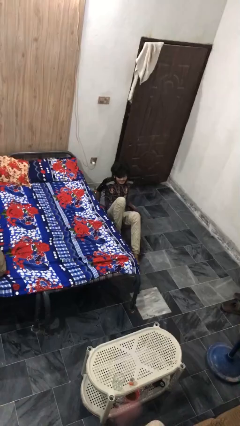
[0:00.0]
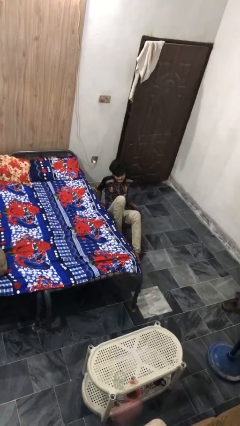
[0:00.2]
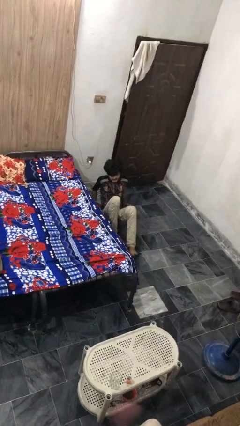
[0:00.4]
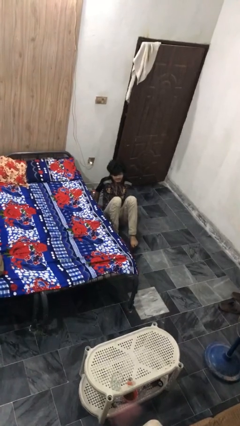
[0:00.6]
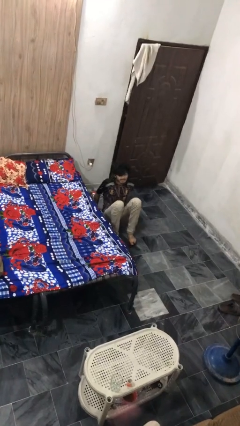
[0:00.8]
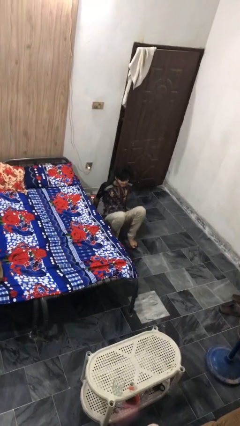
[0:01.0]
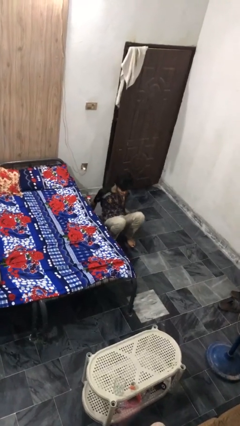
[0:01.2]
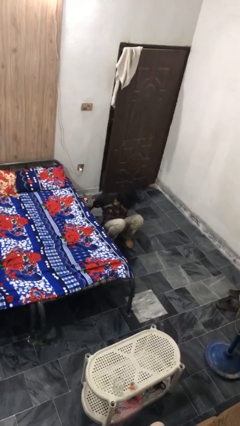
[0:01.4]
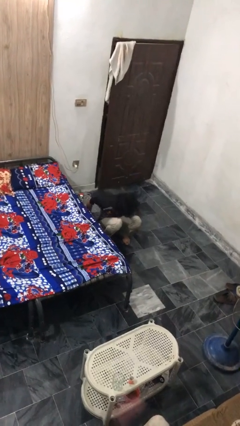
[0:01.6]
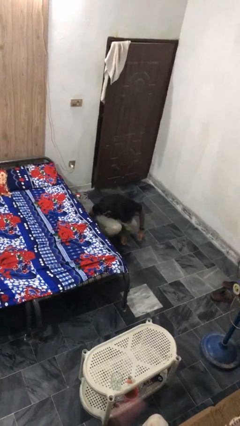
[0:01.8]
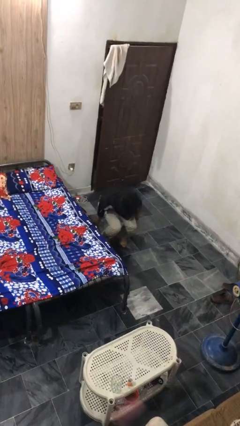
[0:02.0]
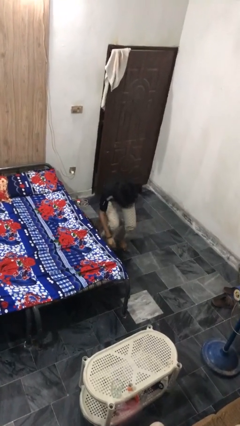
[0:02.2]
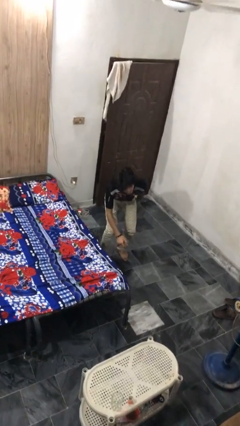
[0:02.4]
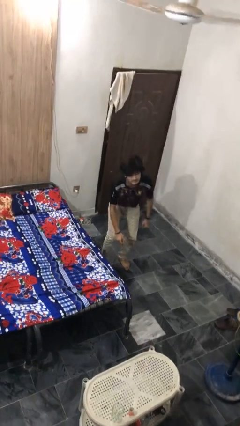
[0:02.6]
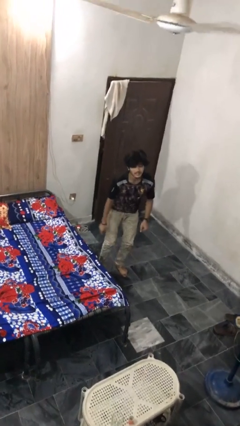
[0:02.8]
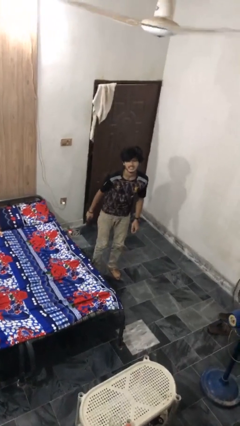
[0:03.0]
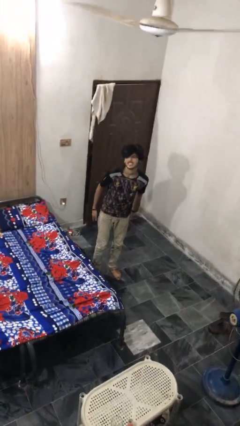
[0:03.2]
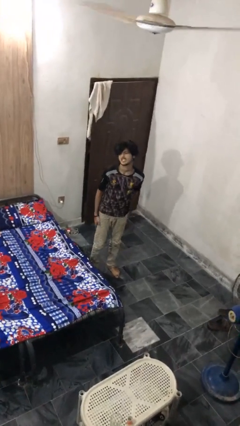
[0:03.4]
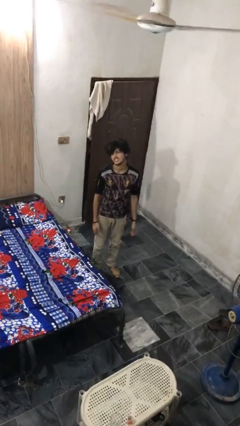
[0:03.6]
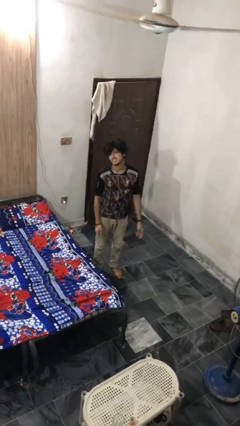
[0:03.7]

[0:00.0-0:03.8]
person stands up from floor

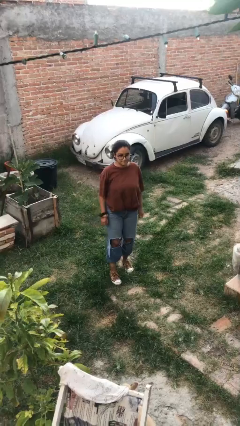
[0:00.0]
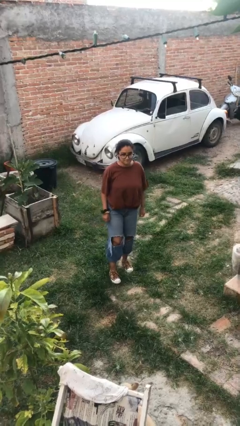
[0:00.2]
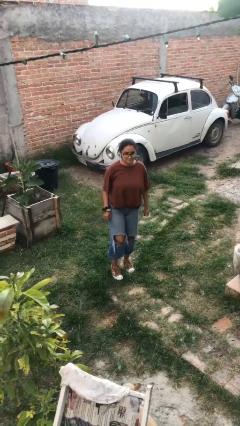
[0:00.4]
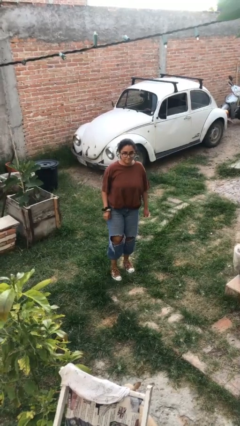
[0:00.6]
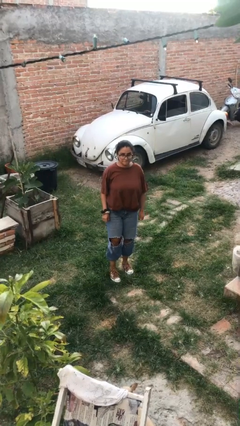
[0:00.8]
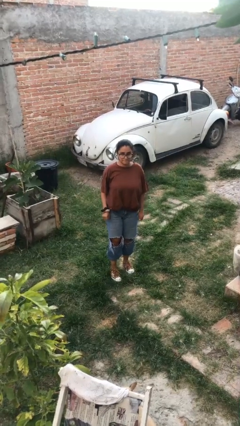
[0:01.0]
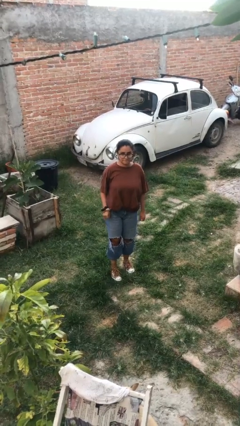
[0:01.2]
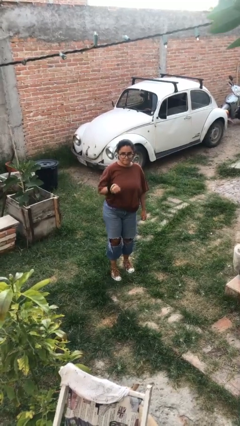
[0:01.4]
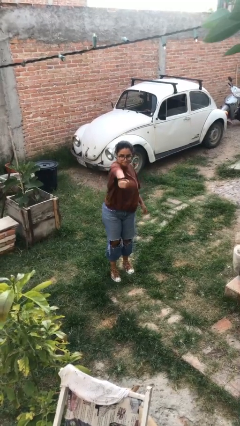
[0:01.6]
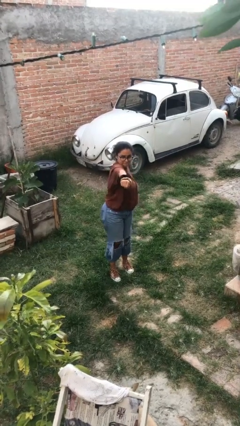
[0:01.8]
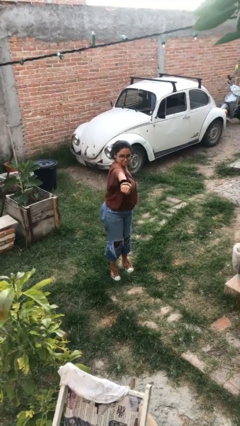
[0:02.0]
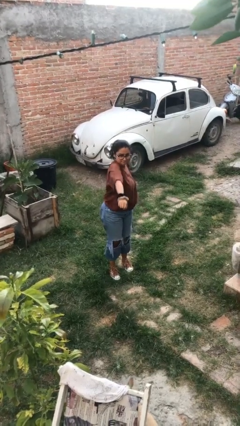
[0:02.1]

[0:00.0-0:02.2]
person karate chop

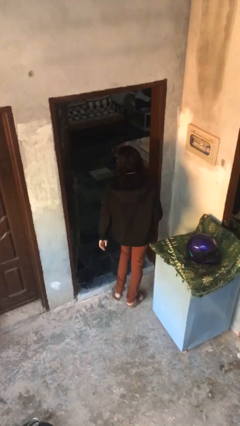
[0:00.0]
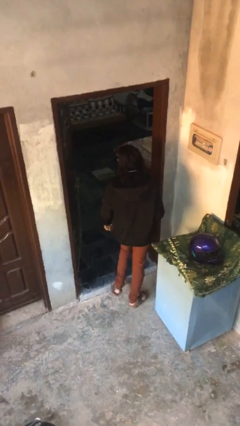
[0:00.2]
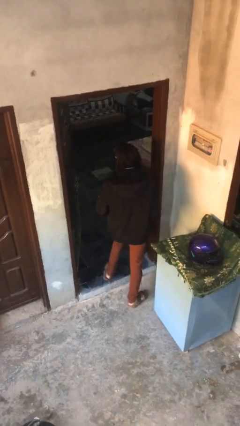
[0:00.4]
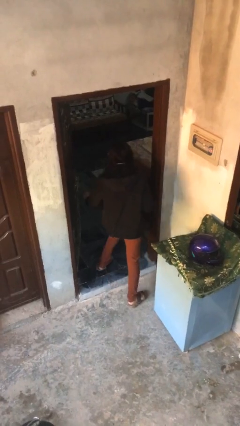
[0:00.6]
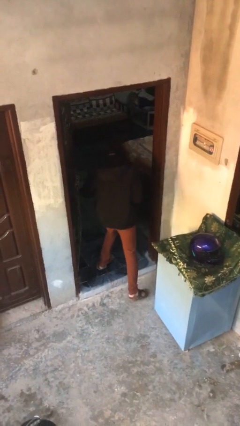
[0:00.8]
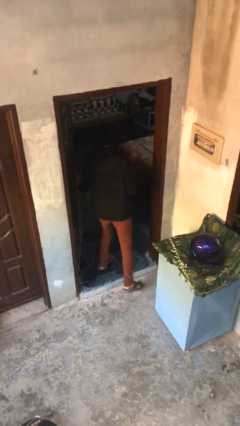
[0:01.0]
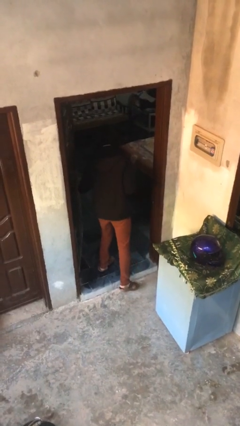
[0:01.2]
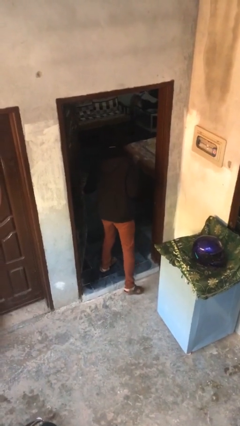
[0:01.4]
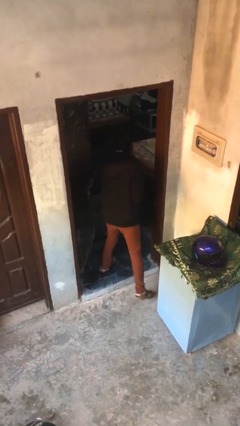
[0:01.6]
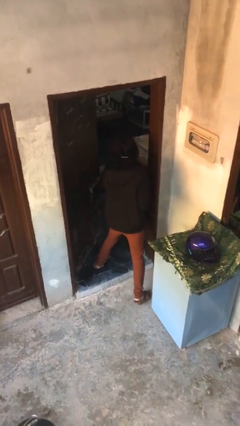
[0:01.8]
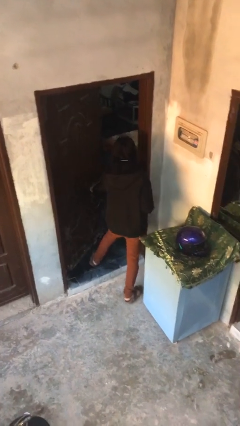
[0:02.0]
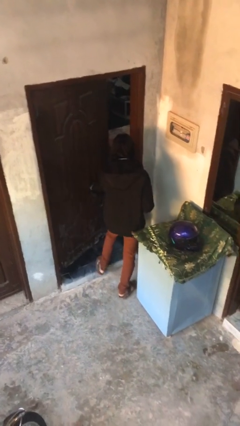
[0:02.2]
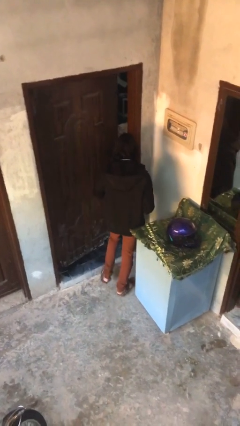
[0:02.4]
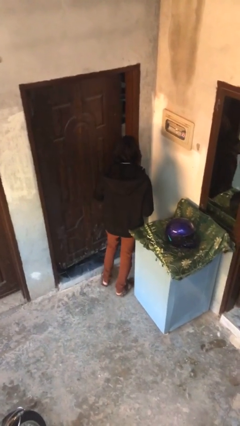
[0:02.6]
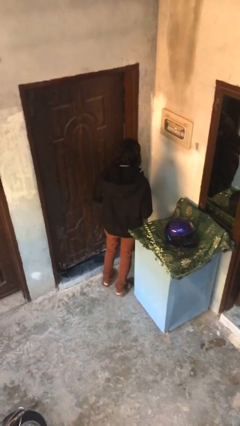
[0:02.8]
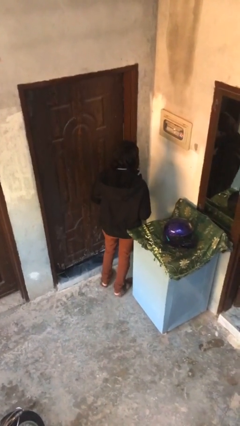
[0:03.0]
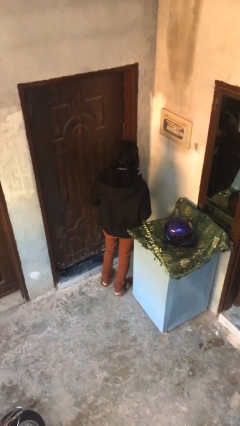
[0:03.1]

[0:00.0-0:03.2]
person closes facility door

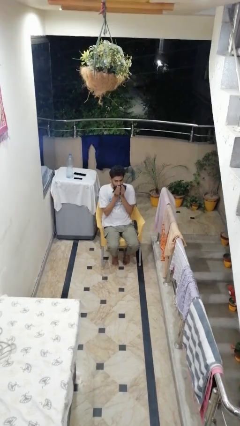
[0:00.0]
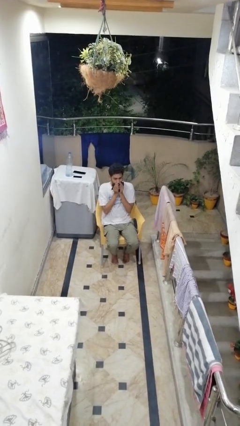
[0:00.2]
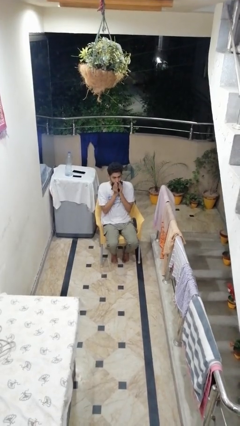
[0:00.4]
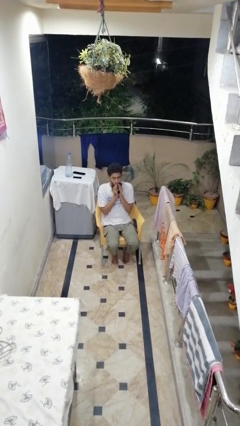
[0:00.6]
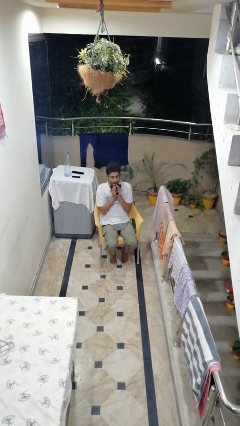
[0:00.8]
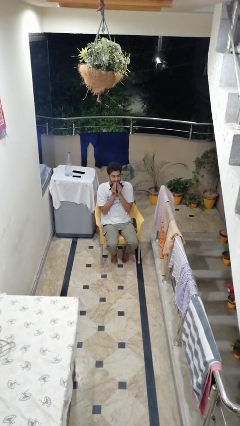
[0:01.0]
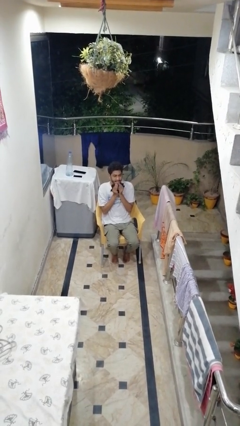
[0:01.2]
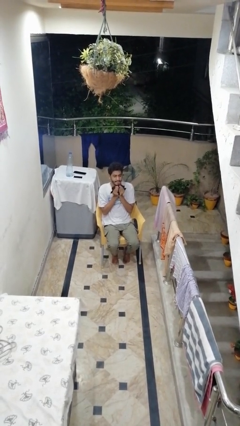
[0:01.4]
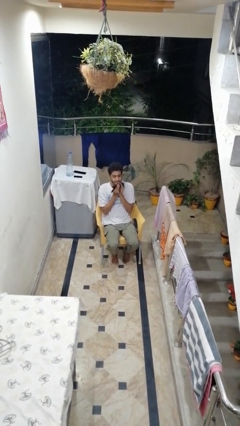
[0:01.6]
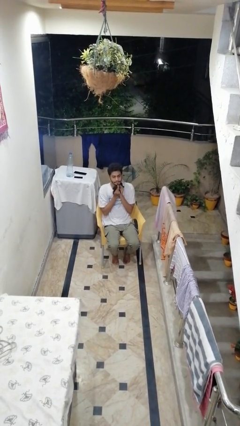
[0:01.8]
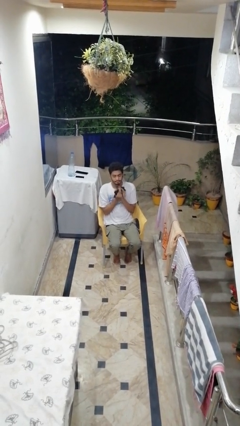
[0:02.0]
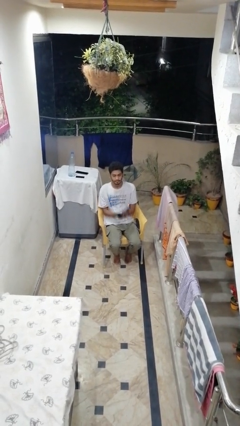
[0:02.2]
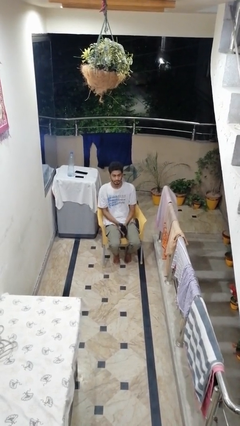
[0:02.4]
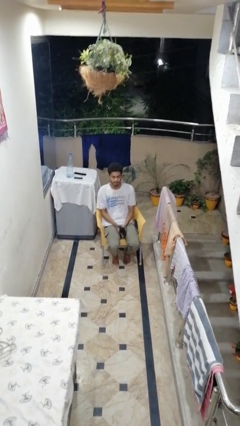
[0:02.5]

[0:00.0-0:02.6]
person wipes mouth with napkin

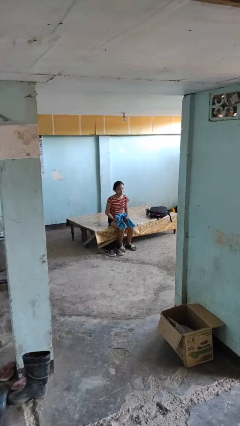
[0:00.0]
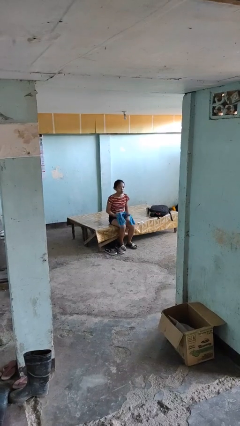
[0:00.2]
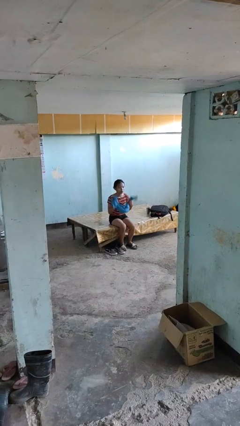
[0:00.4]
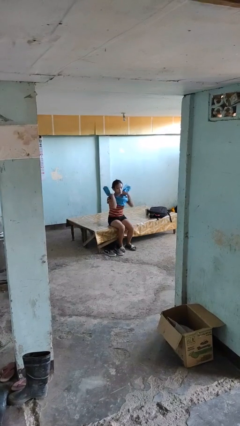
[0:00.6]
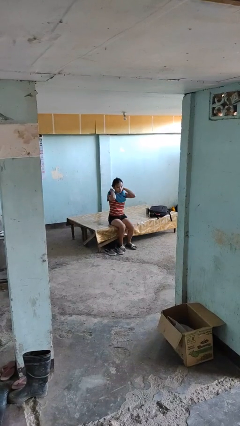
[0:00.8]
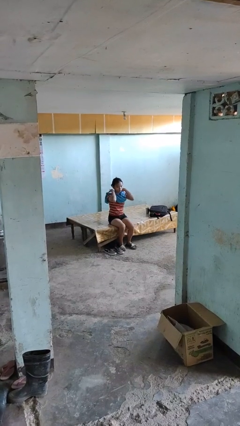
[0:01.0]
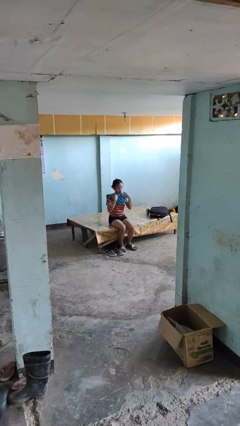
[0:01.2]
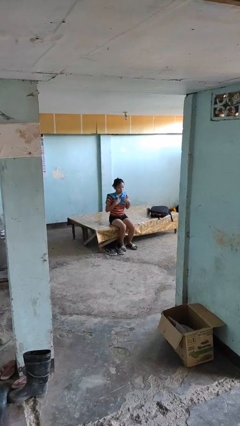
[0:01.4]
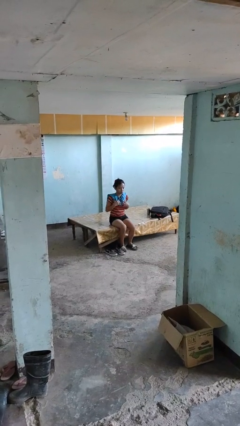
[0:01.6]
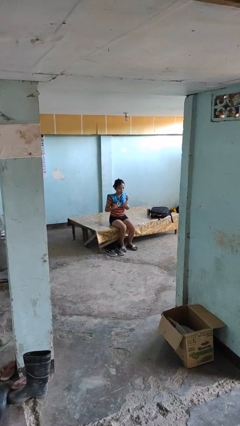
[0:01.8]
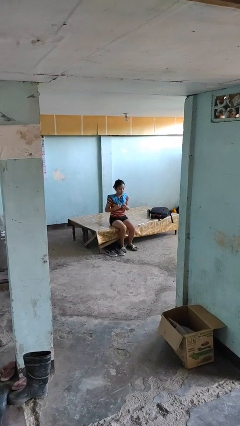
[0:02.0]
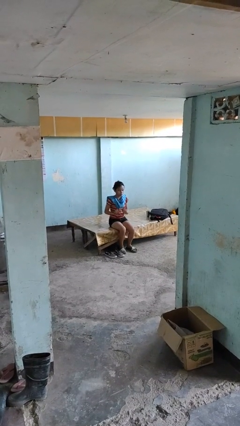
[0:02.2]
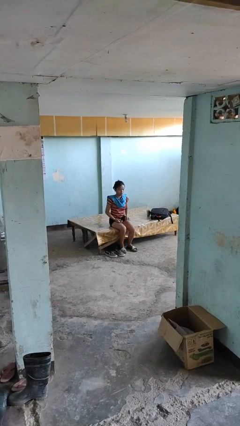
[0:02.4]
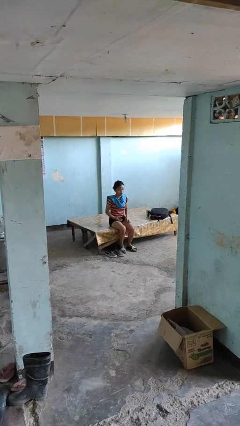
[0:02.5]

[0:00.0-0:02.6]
person puts on scarf

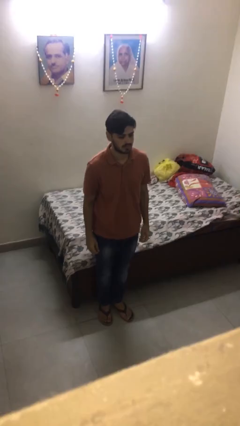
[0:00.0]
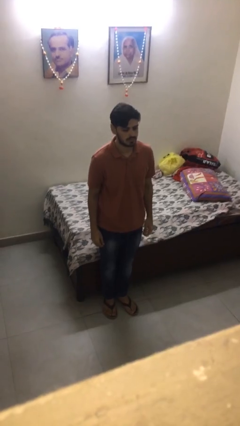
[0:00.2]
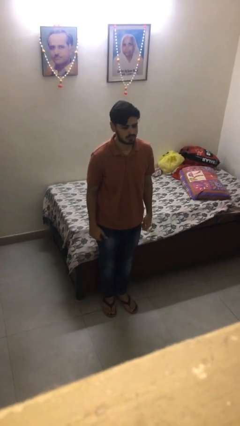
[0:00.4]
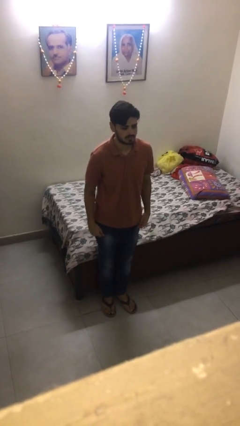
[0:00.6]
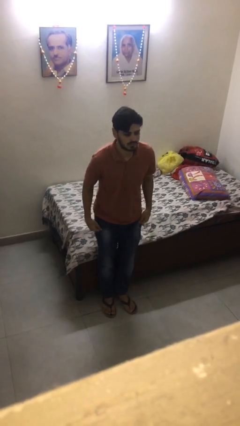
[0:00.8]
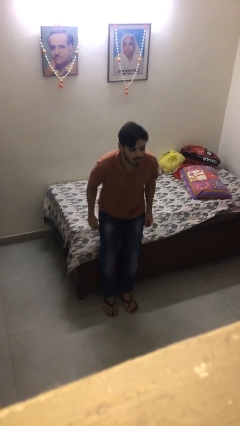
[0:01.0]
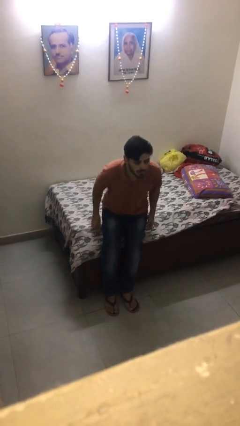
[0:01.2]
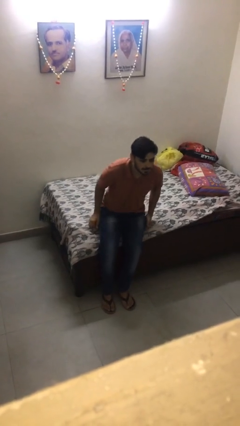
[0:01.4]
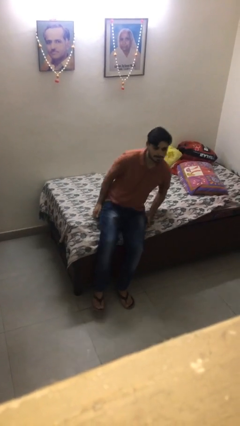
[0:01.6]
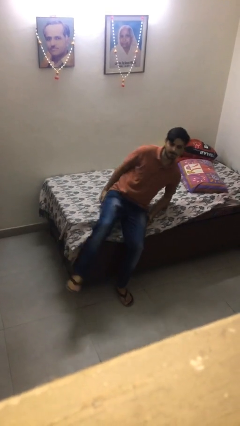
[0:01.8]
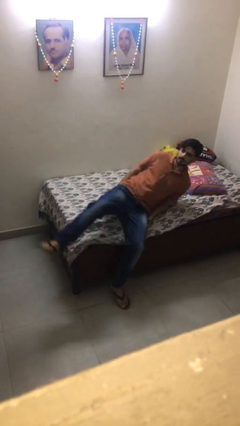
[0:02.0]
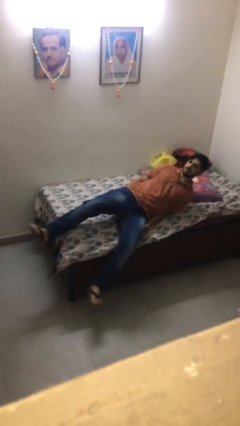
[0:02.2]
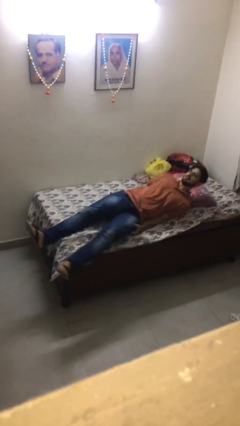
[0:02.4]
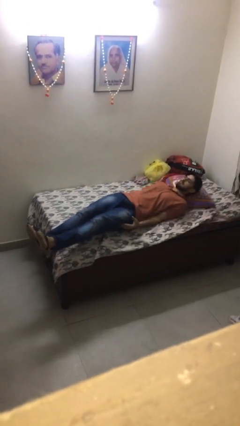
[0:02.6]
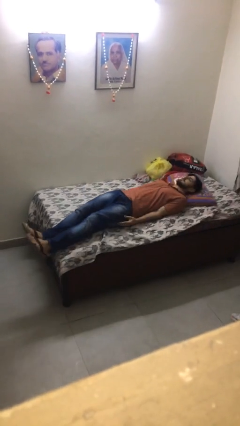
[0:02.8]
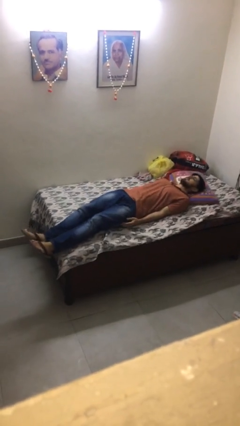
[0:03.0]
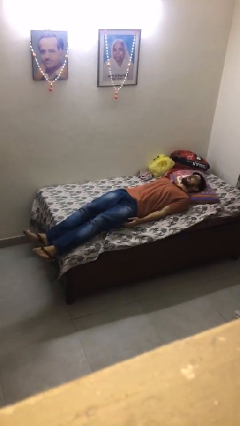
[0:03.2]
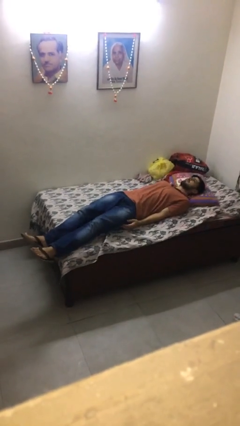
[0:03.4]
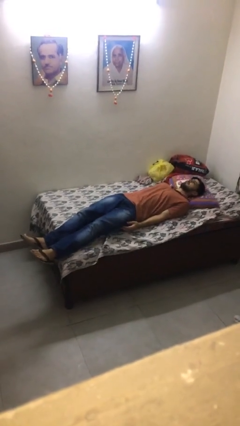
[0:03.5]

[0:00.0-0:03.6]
person lies down on bed
